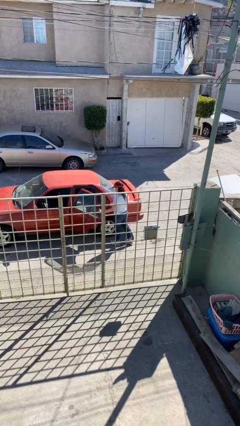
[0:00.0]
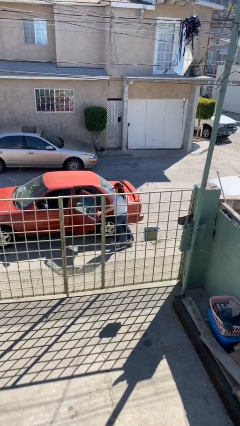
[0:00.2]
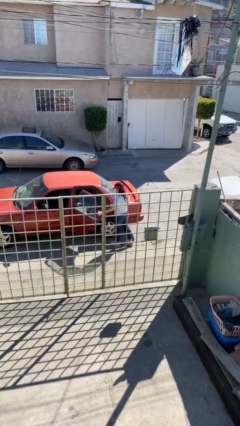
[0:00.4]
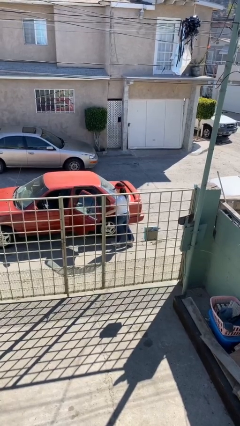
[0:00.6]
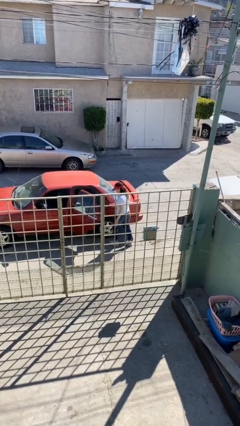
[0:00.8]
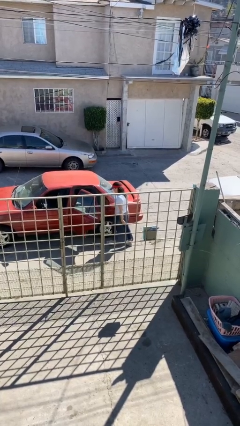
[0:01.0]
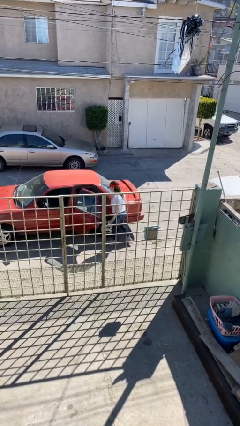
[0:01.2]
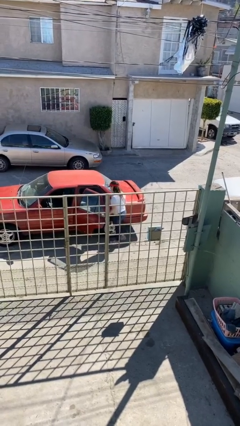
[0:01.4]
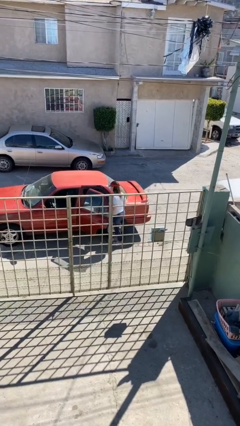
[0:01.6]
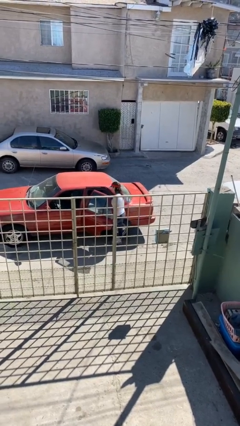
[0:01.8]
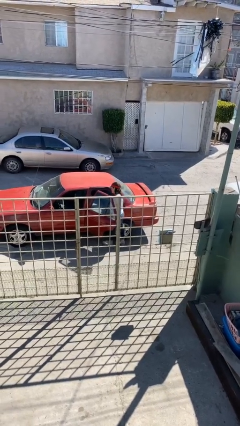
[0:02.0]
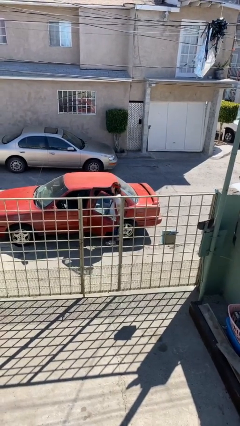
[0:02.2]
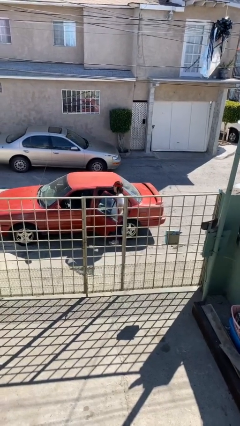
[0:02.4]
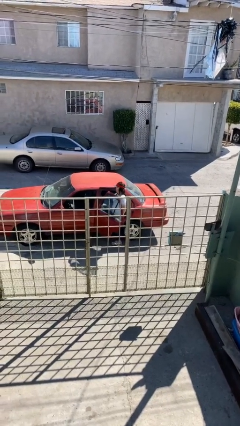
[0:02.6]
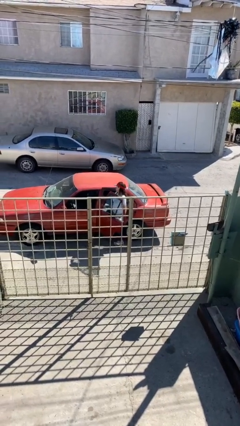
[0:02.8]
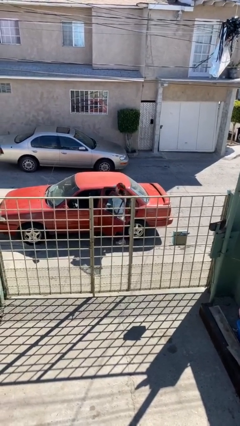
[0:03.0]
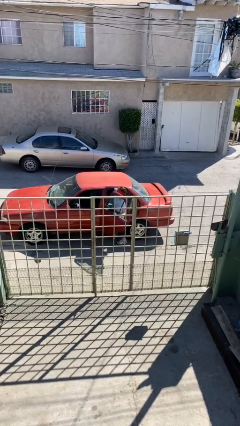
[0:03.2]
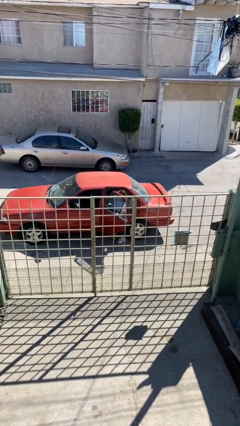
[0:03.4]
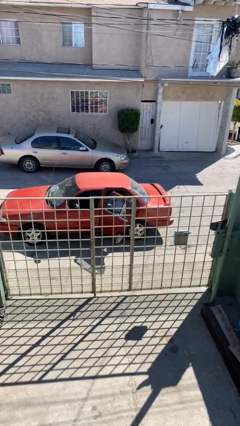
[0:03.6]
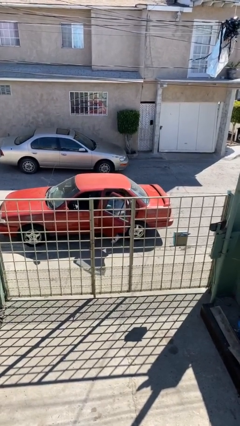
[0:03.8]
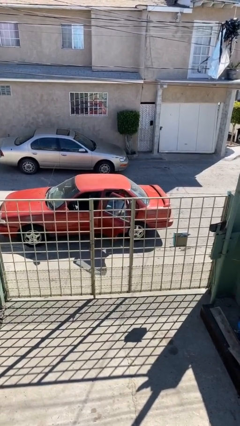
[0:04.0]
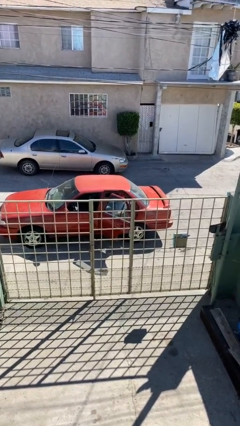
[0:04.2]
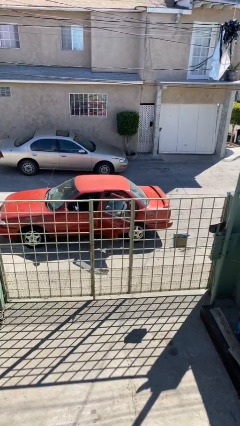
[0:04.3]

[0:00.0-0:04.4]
person enters car

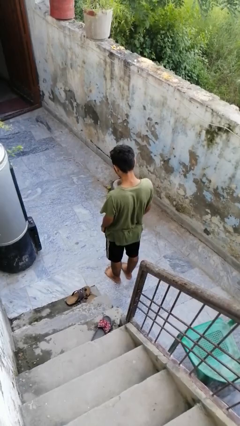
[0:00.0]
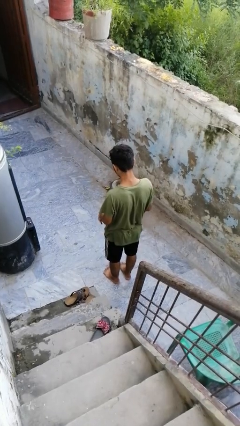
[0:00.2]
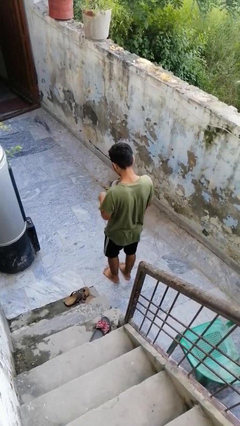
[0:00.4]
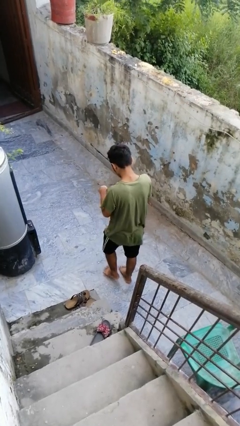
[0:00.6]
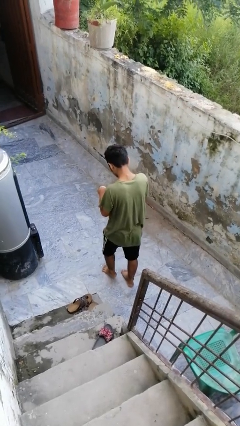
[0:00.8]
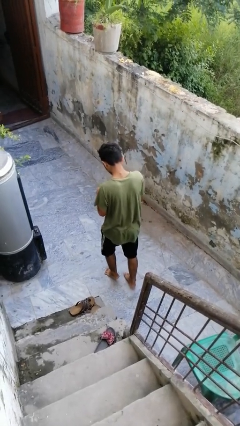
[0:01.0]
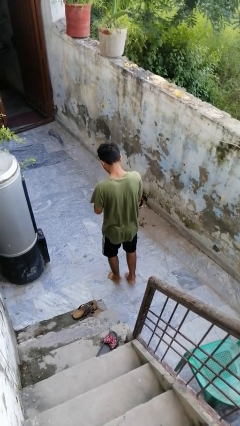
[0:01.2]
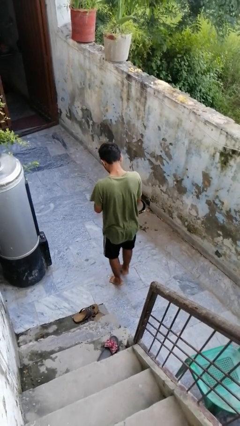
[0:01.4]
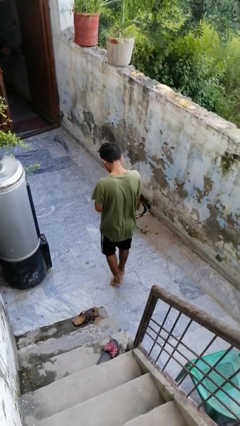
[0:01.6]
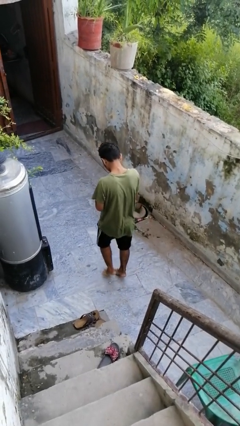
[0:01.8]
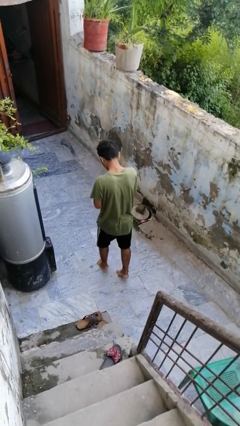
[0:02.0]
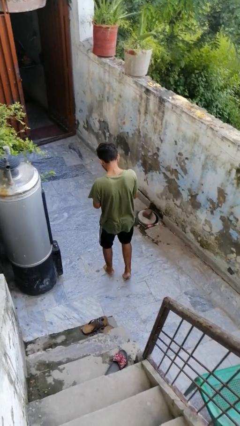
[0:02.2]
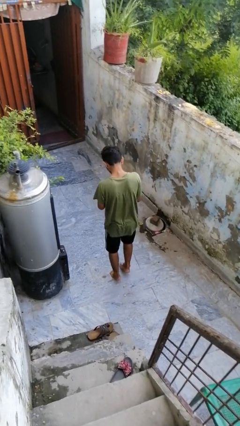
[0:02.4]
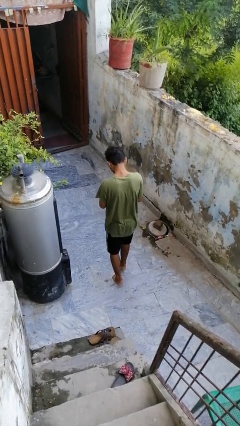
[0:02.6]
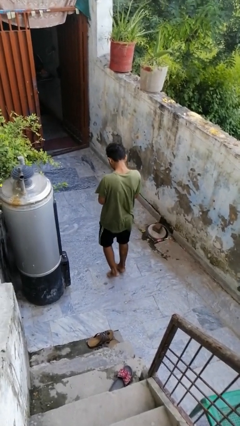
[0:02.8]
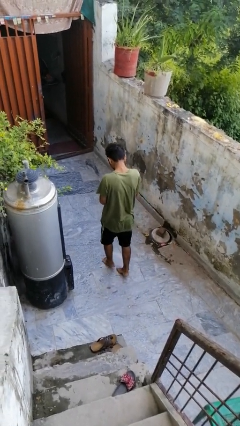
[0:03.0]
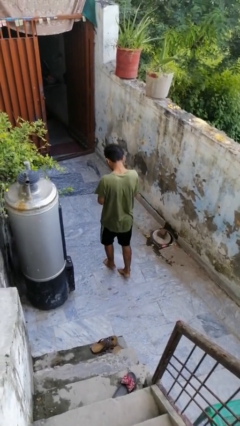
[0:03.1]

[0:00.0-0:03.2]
person walks tiptoe

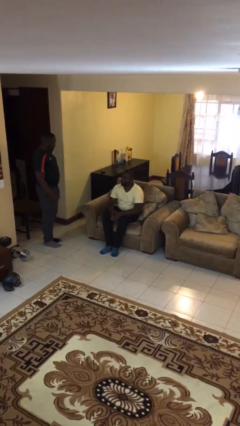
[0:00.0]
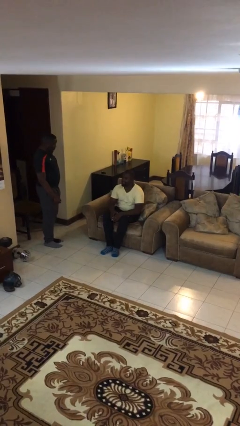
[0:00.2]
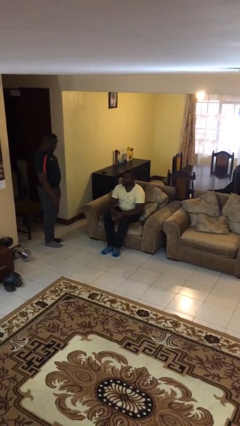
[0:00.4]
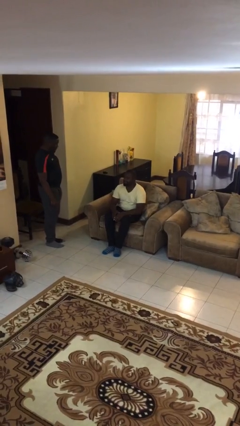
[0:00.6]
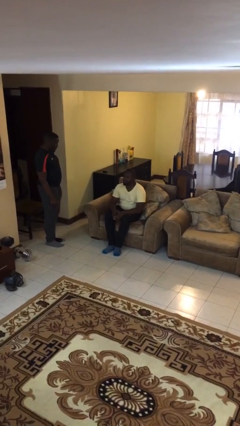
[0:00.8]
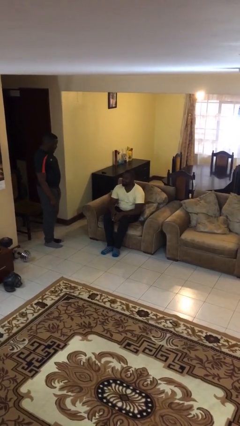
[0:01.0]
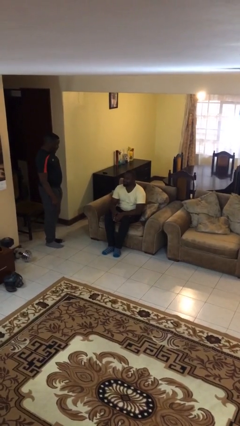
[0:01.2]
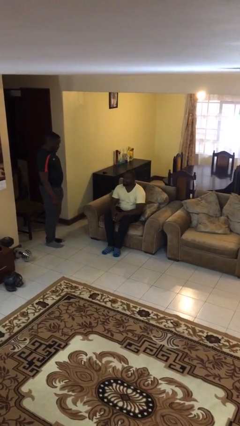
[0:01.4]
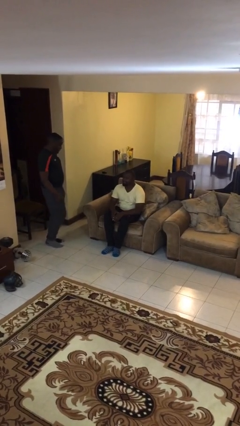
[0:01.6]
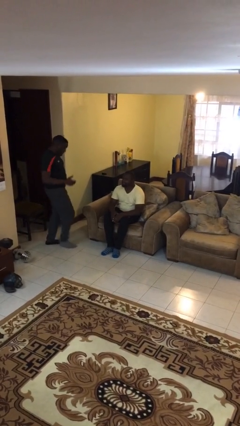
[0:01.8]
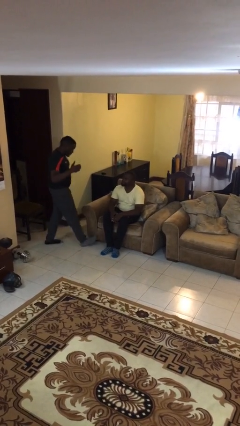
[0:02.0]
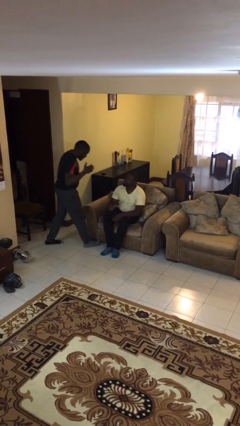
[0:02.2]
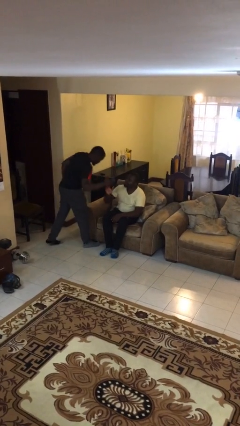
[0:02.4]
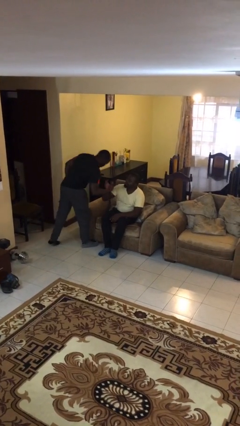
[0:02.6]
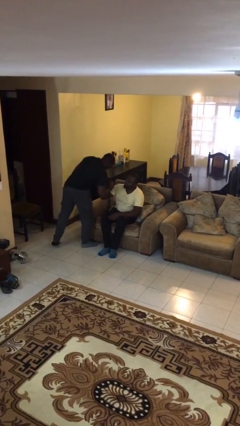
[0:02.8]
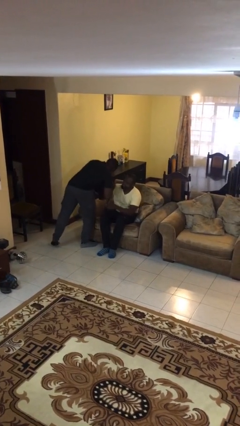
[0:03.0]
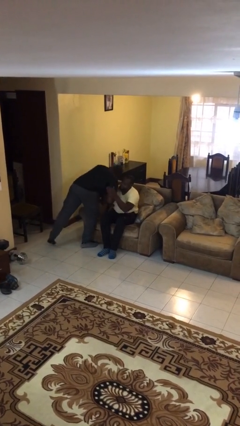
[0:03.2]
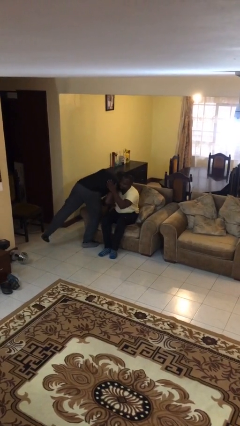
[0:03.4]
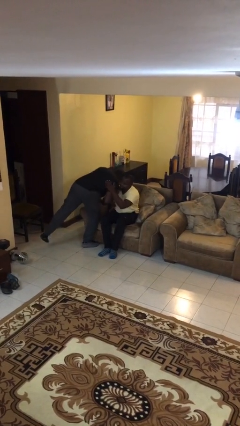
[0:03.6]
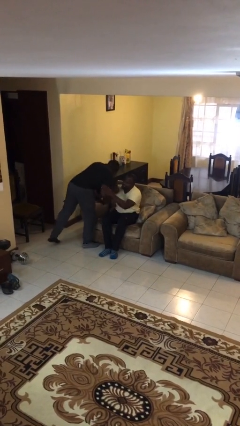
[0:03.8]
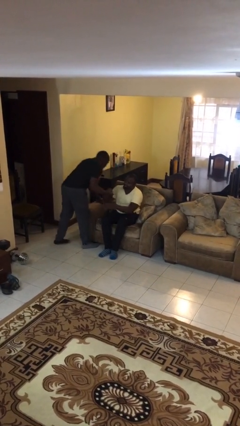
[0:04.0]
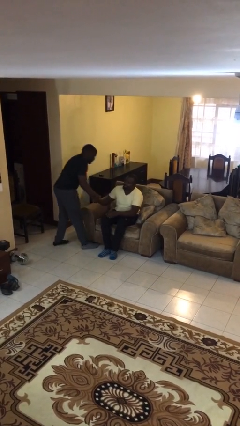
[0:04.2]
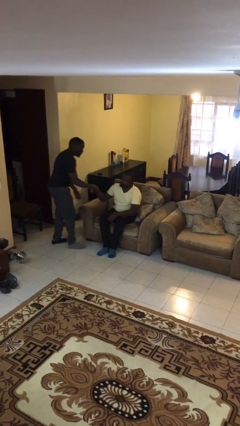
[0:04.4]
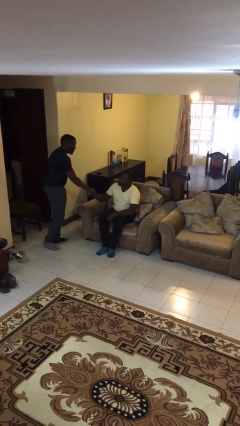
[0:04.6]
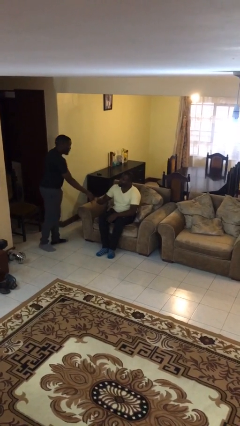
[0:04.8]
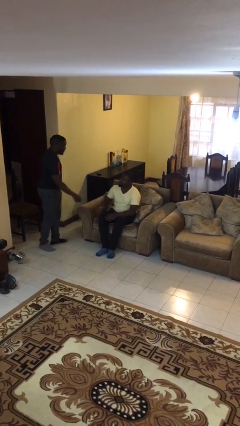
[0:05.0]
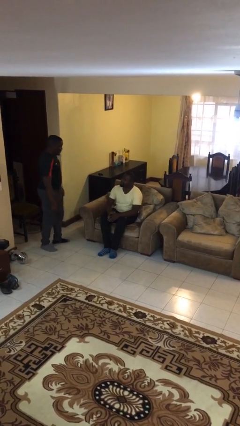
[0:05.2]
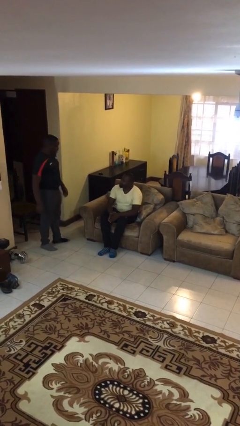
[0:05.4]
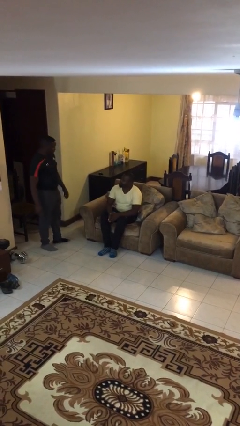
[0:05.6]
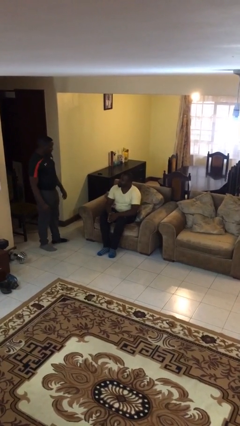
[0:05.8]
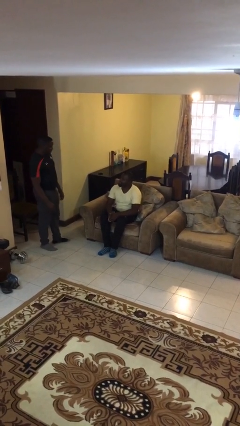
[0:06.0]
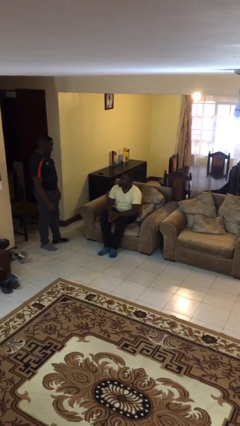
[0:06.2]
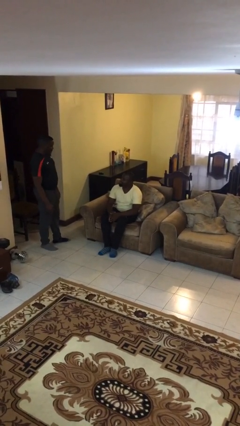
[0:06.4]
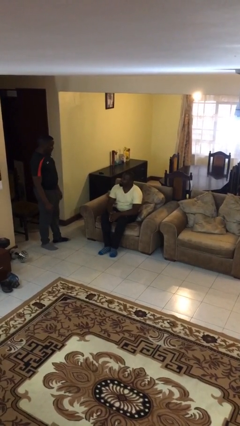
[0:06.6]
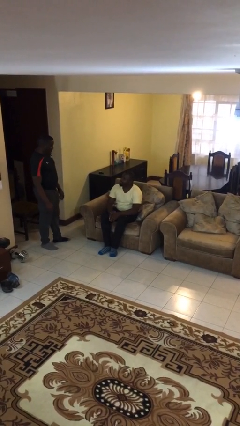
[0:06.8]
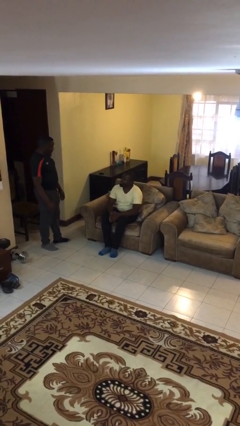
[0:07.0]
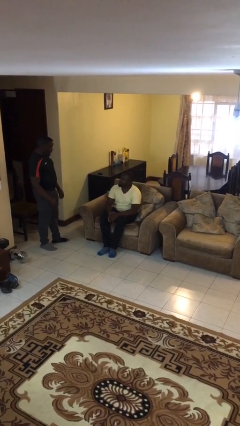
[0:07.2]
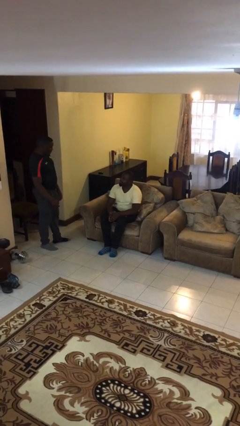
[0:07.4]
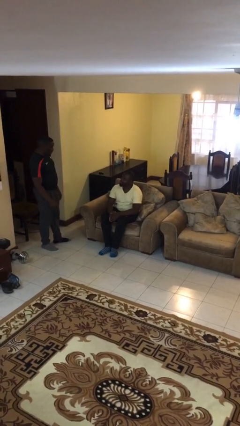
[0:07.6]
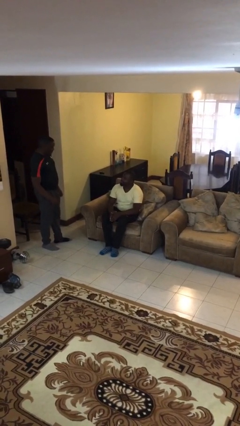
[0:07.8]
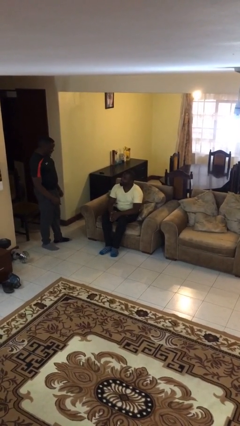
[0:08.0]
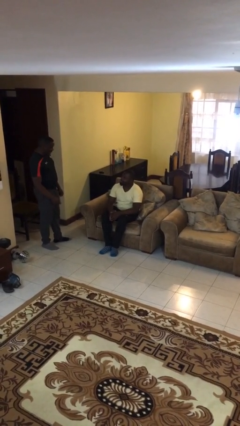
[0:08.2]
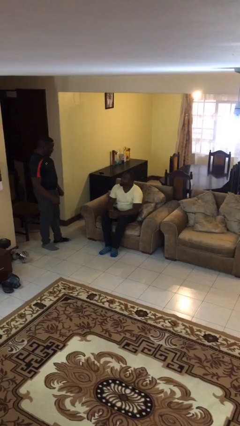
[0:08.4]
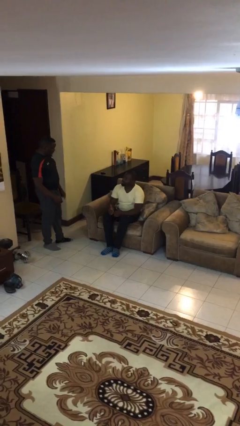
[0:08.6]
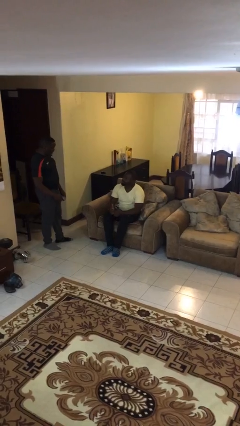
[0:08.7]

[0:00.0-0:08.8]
person embraces person

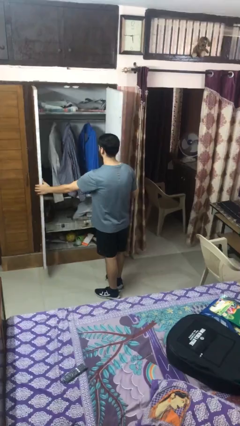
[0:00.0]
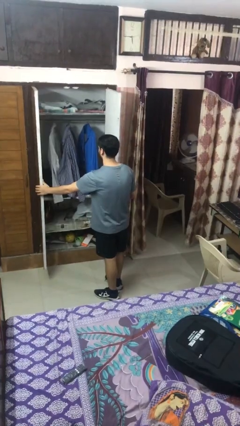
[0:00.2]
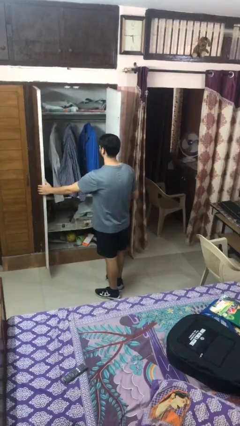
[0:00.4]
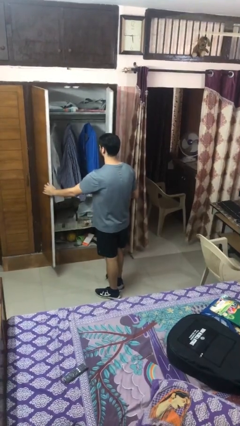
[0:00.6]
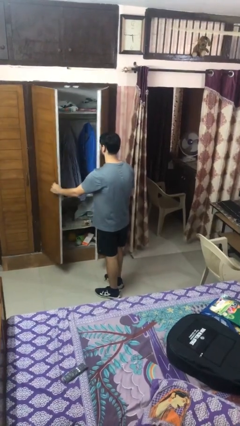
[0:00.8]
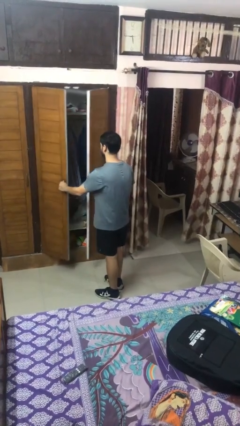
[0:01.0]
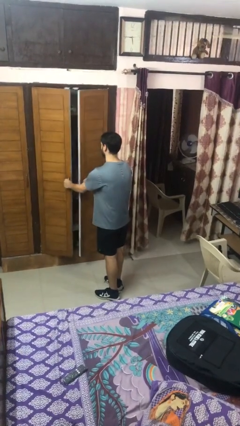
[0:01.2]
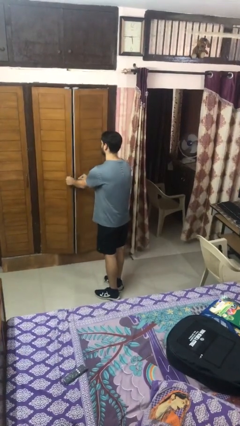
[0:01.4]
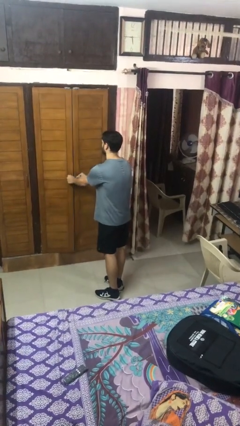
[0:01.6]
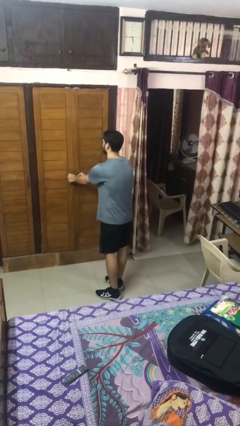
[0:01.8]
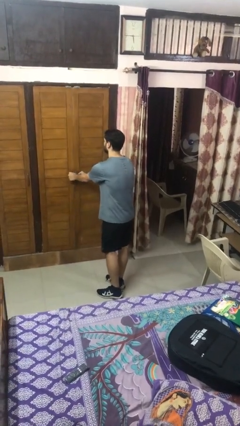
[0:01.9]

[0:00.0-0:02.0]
person closes closet door
